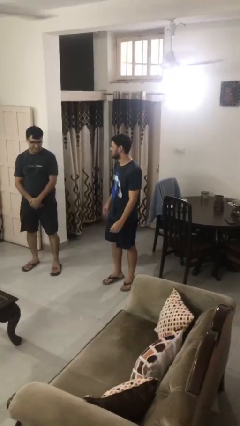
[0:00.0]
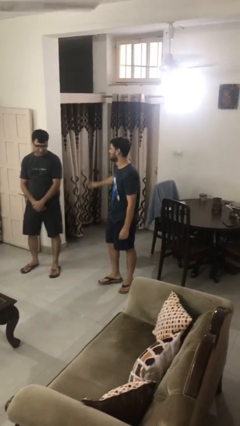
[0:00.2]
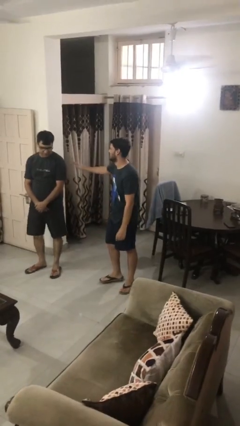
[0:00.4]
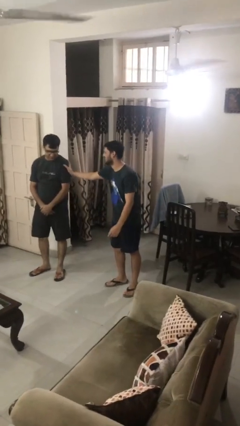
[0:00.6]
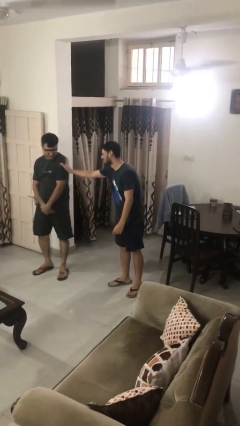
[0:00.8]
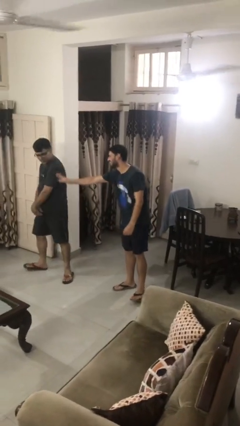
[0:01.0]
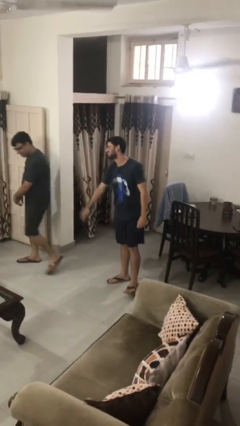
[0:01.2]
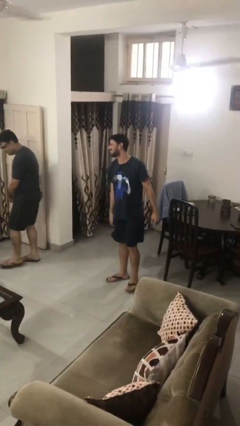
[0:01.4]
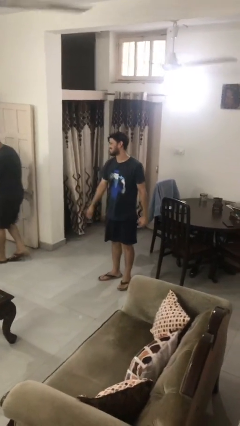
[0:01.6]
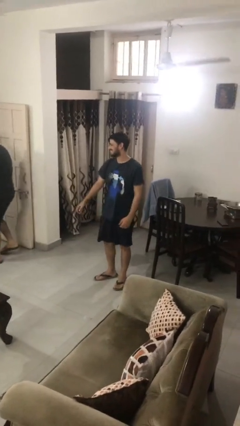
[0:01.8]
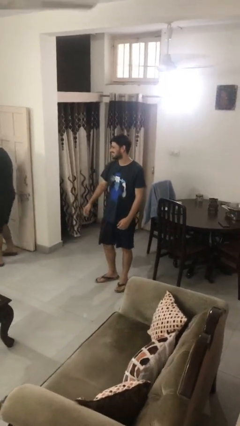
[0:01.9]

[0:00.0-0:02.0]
person shoves person

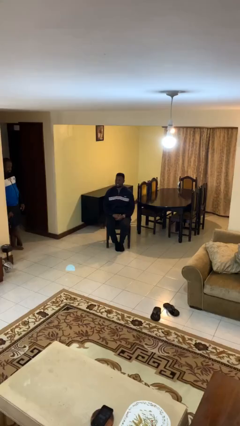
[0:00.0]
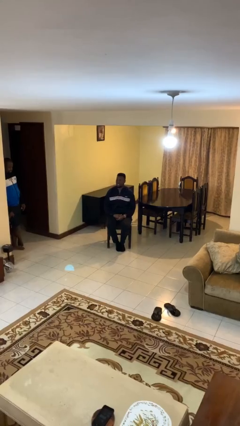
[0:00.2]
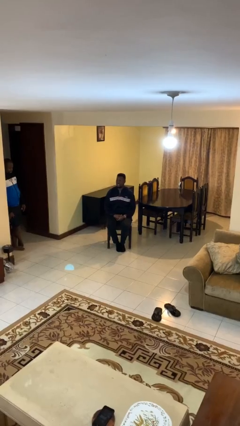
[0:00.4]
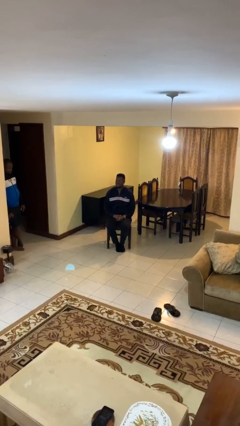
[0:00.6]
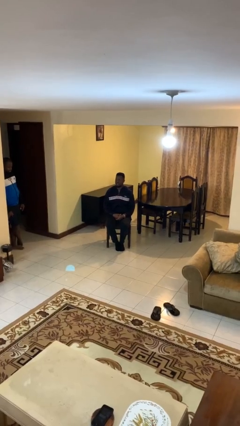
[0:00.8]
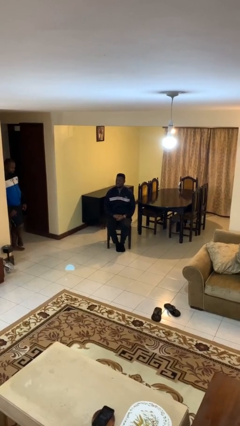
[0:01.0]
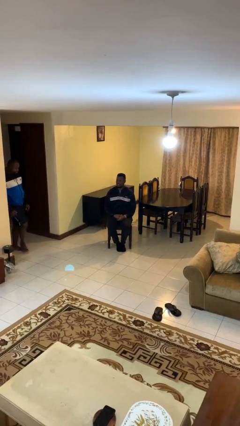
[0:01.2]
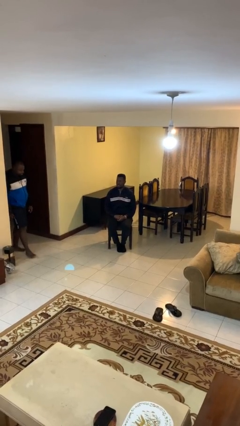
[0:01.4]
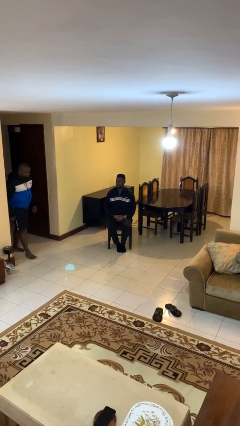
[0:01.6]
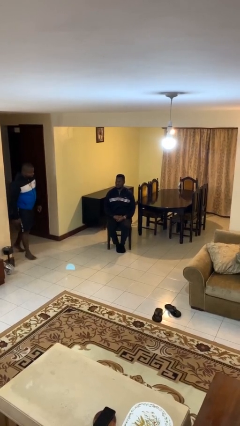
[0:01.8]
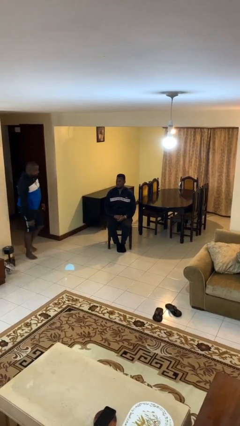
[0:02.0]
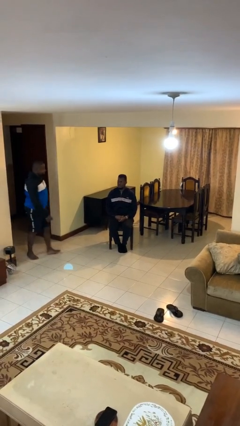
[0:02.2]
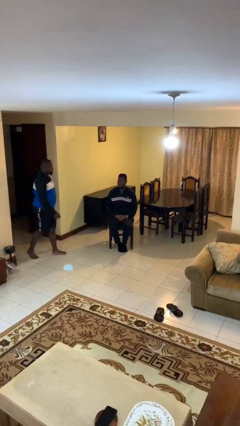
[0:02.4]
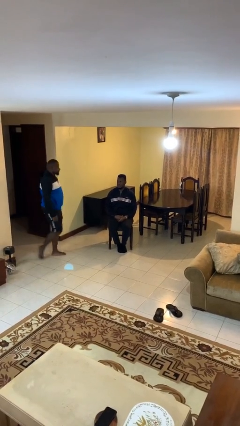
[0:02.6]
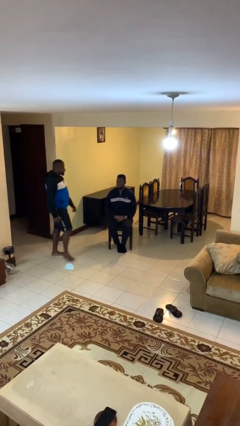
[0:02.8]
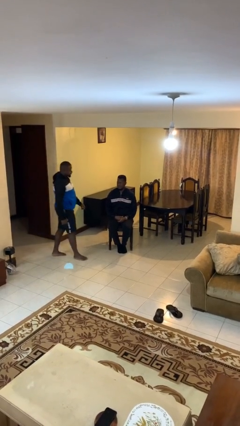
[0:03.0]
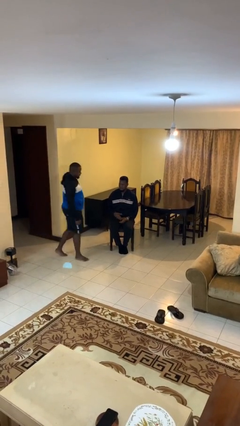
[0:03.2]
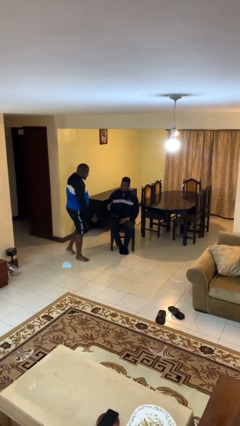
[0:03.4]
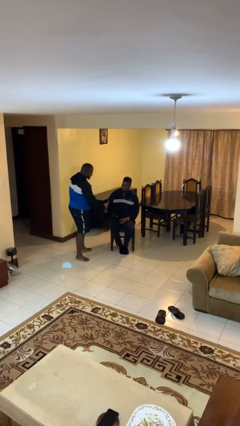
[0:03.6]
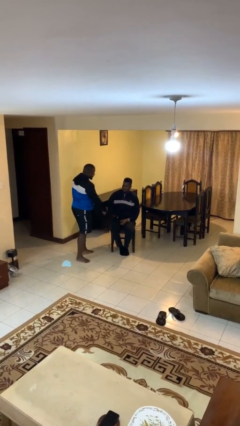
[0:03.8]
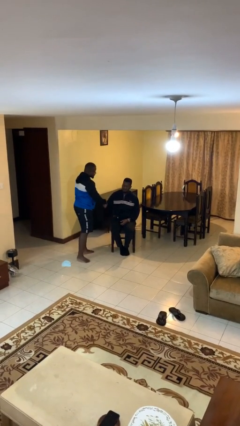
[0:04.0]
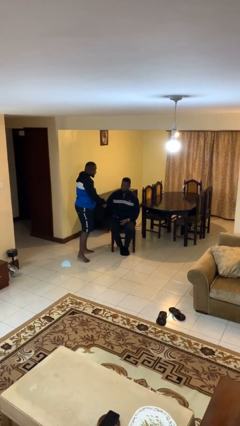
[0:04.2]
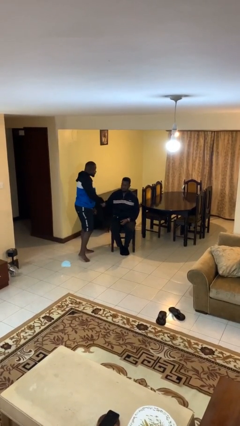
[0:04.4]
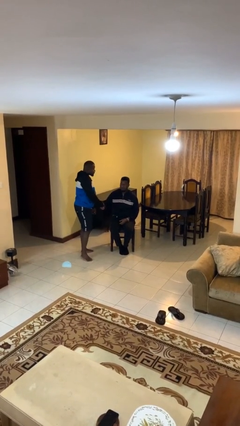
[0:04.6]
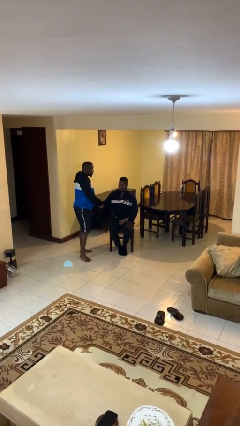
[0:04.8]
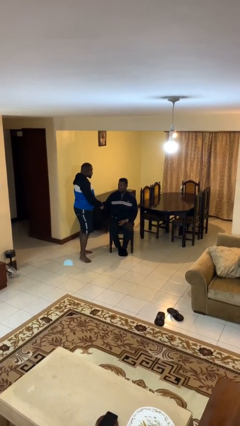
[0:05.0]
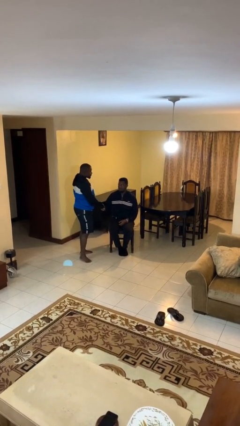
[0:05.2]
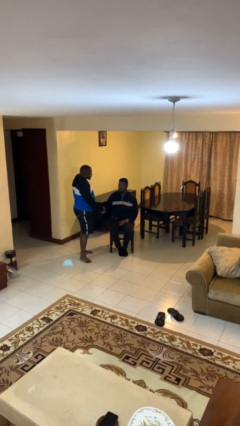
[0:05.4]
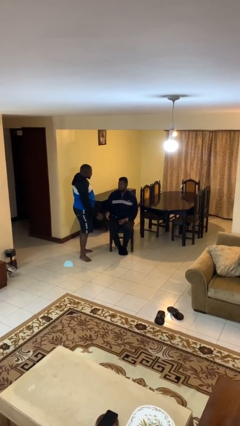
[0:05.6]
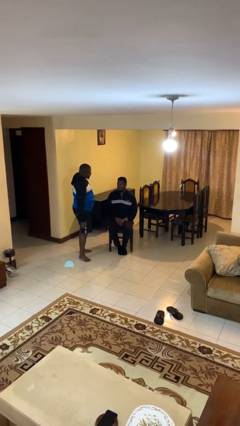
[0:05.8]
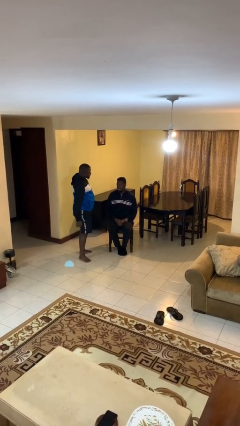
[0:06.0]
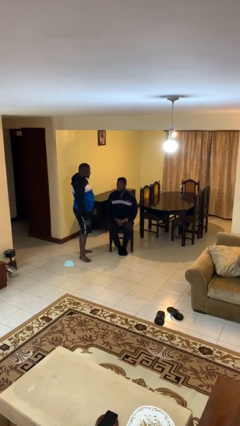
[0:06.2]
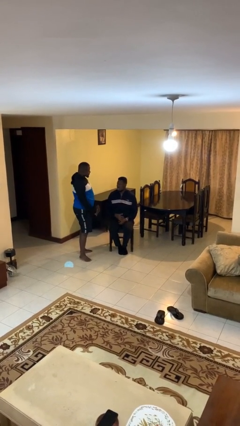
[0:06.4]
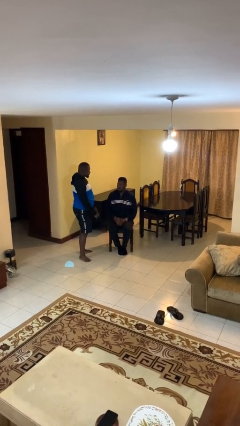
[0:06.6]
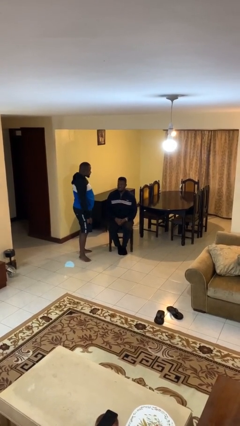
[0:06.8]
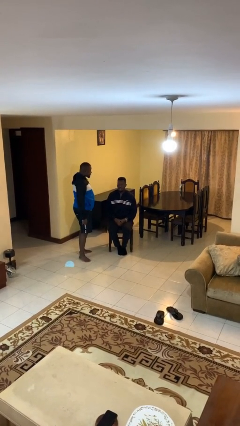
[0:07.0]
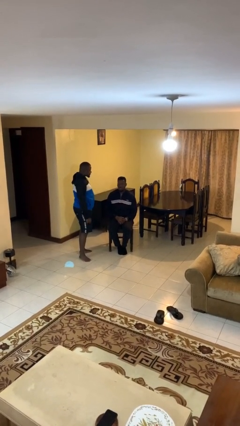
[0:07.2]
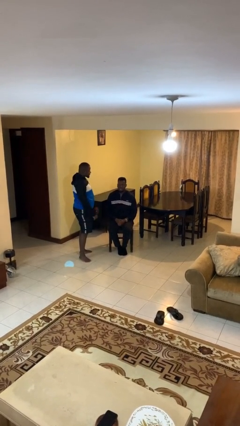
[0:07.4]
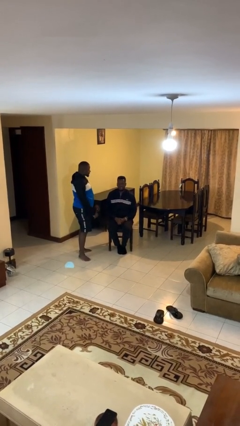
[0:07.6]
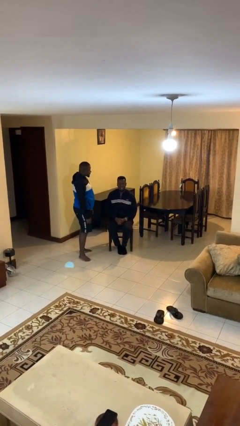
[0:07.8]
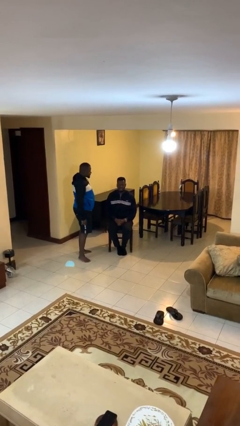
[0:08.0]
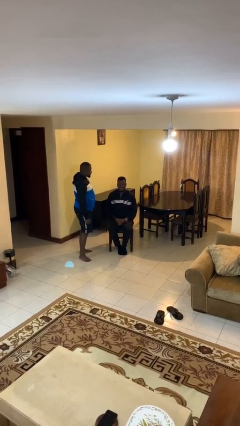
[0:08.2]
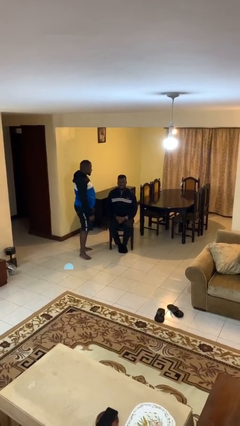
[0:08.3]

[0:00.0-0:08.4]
person shakes hand

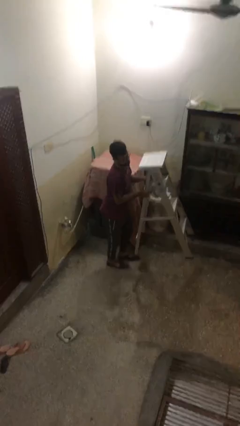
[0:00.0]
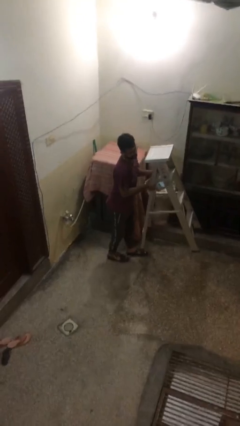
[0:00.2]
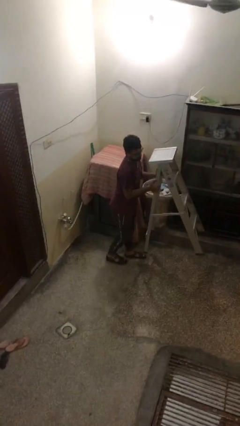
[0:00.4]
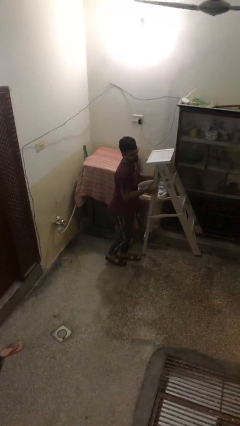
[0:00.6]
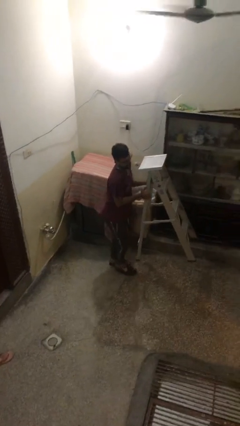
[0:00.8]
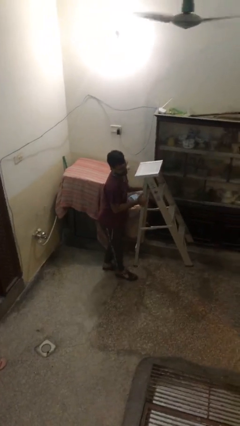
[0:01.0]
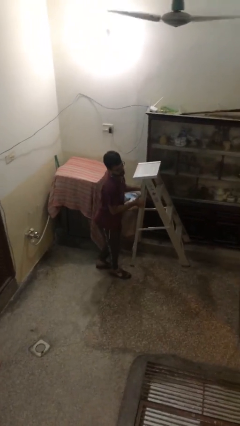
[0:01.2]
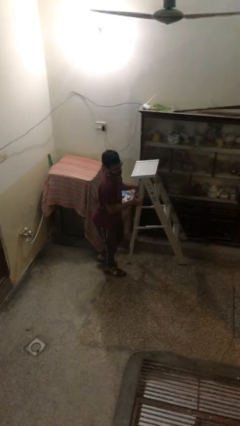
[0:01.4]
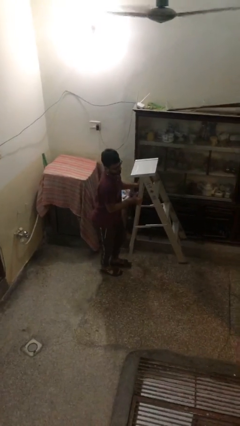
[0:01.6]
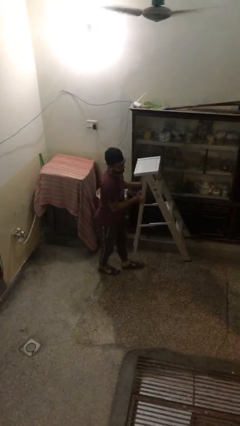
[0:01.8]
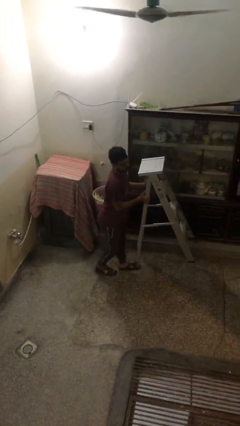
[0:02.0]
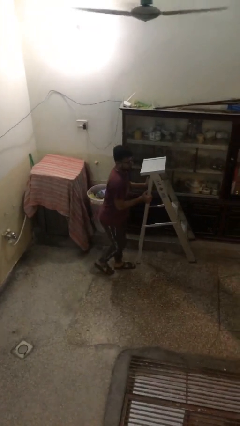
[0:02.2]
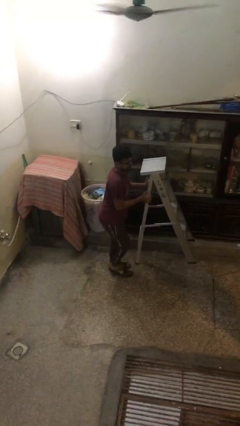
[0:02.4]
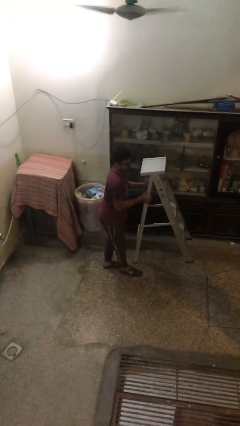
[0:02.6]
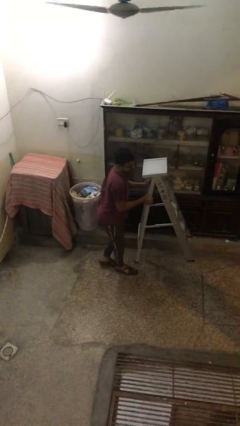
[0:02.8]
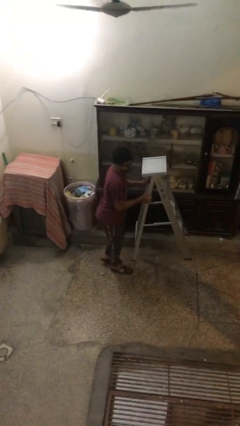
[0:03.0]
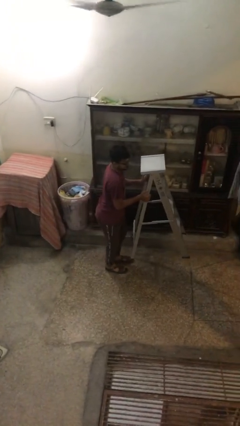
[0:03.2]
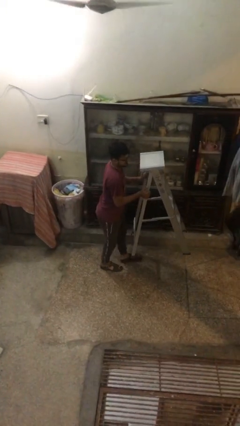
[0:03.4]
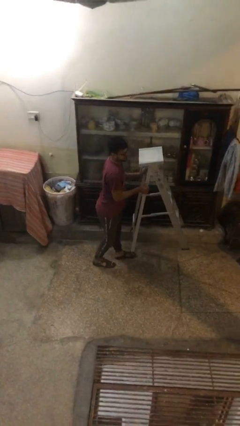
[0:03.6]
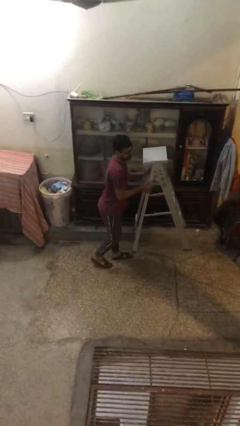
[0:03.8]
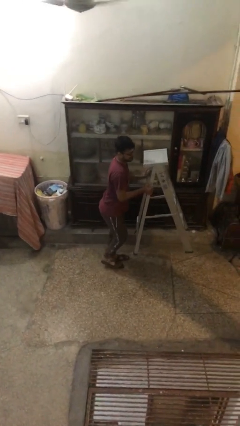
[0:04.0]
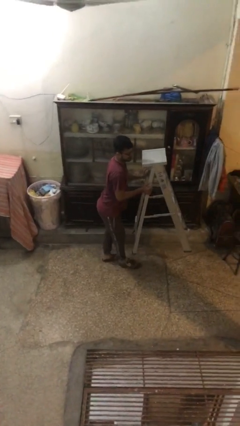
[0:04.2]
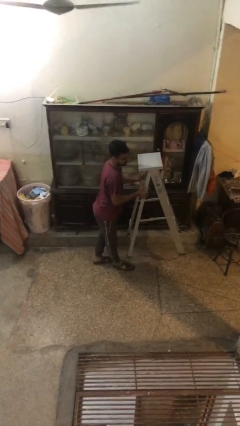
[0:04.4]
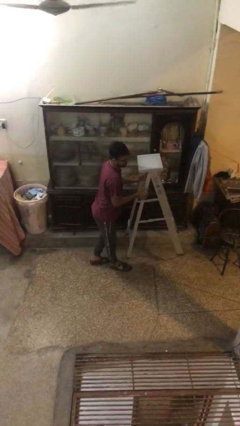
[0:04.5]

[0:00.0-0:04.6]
person carries heavy object

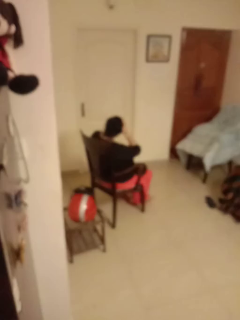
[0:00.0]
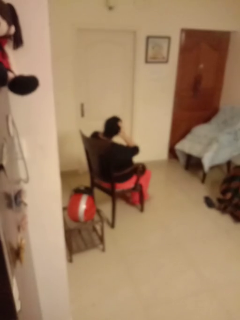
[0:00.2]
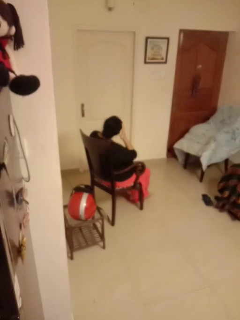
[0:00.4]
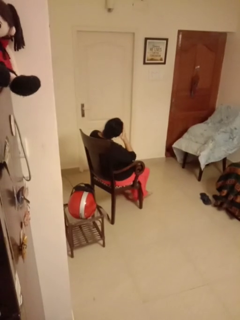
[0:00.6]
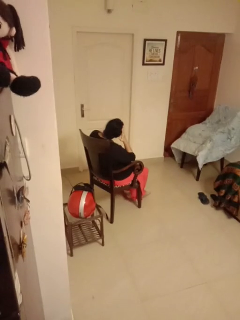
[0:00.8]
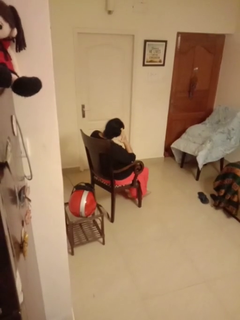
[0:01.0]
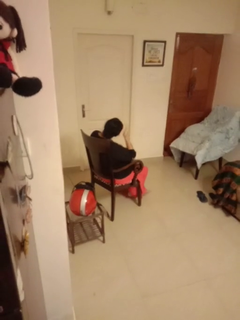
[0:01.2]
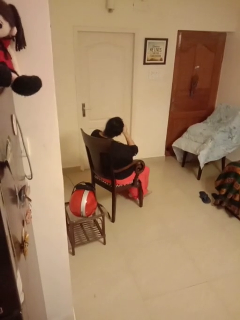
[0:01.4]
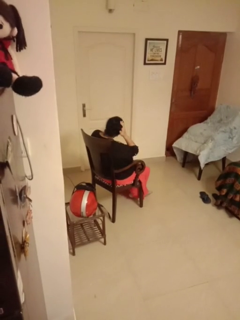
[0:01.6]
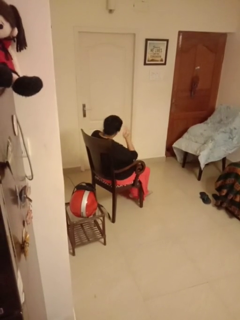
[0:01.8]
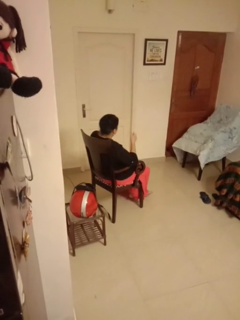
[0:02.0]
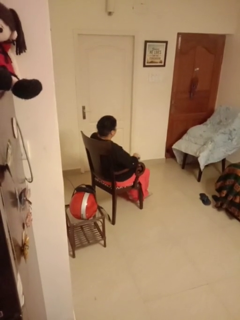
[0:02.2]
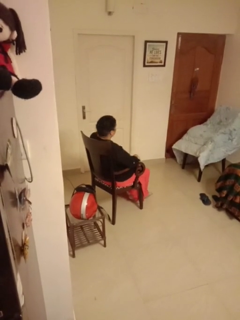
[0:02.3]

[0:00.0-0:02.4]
person strokes hair

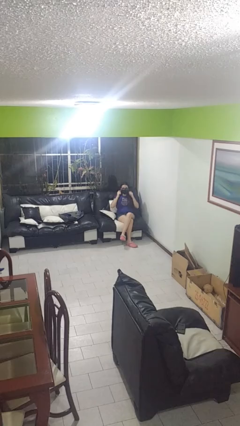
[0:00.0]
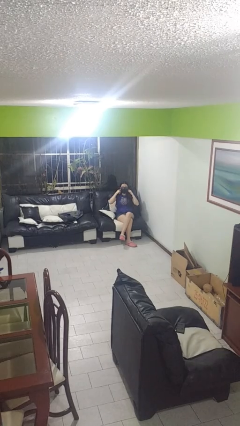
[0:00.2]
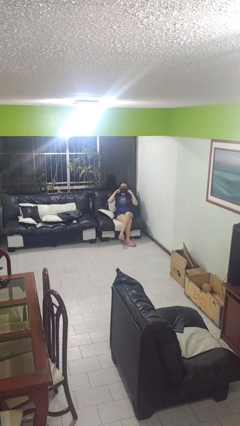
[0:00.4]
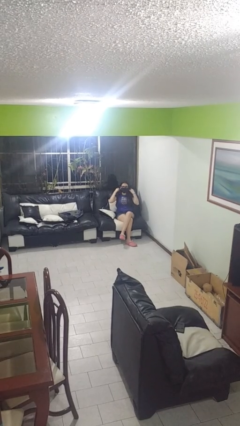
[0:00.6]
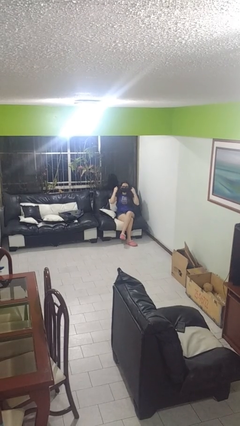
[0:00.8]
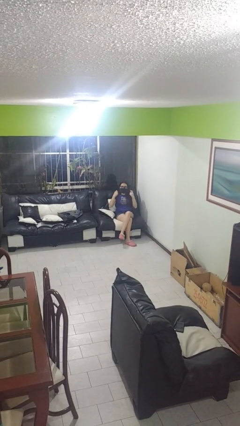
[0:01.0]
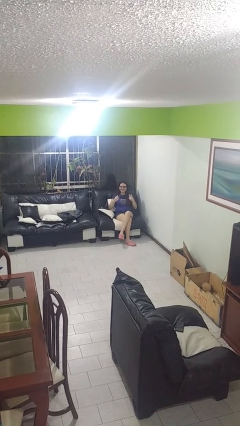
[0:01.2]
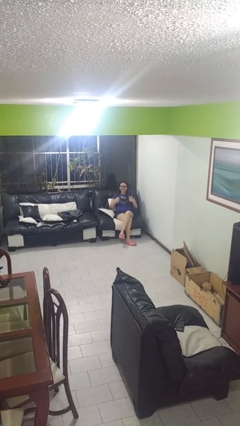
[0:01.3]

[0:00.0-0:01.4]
person takes off facemask
